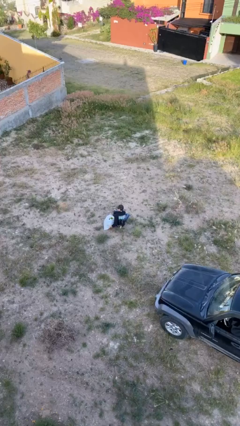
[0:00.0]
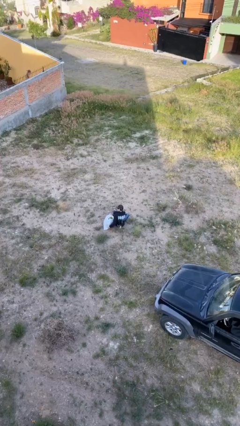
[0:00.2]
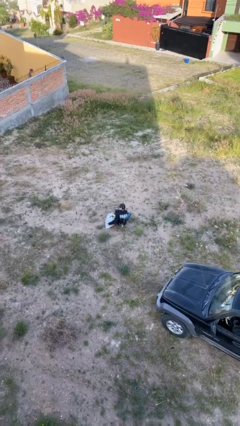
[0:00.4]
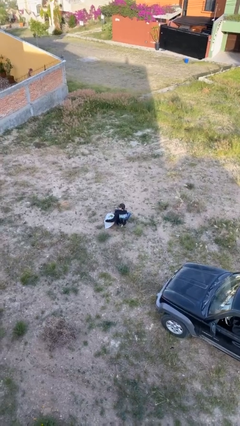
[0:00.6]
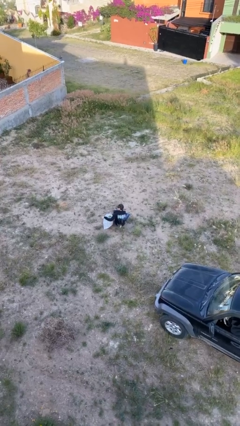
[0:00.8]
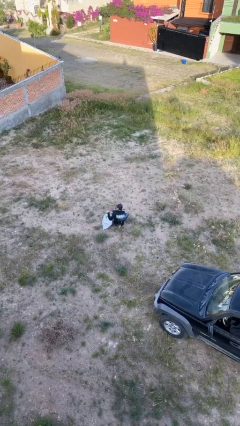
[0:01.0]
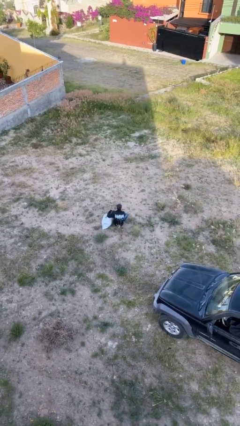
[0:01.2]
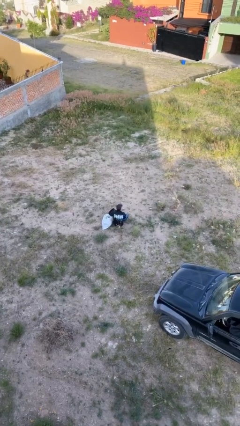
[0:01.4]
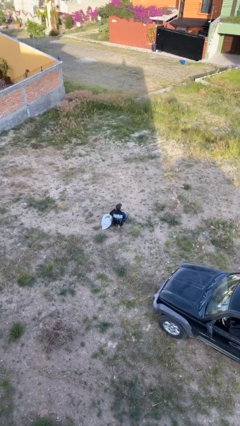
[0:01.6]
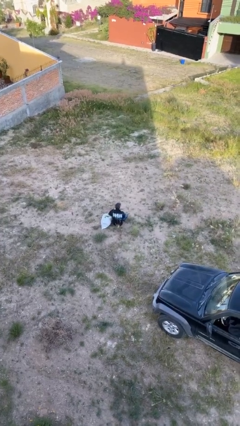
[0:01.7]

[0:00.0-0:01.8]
person puts down object on floor

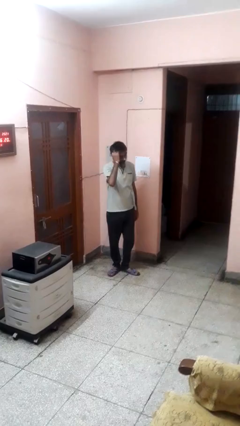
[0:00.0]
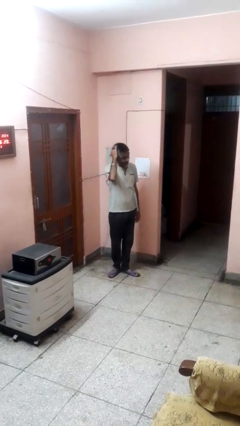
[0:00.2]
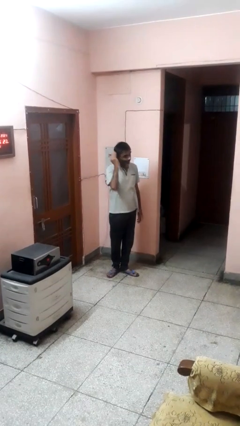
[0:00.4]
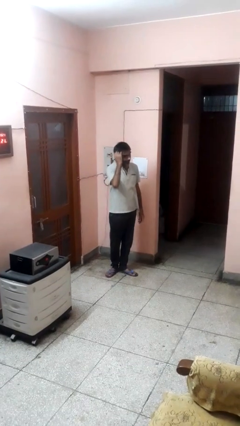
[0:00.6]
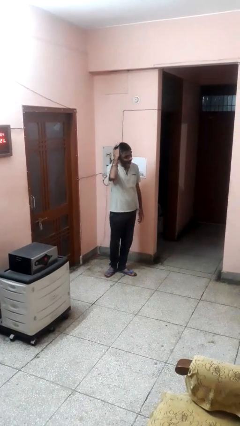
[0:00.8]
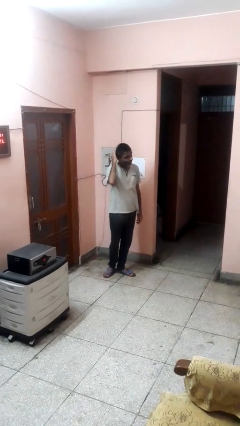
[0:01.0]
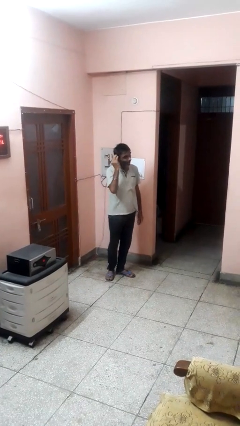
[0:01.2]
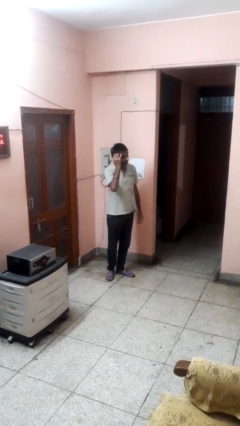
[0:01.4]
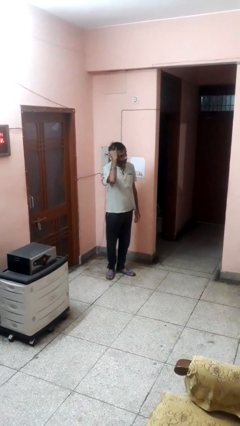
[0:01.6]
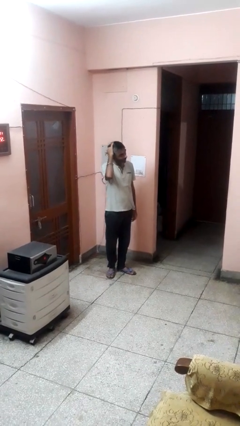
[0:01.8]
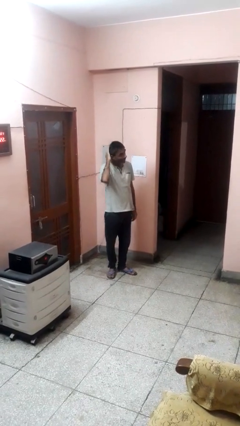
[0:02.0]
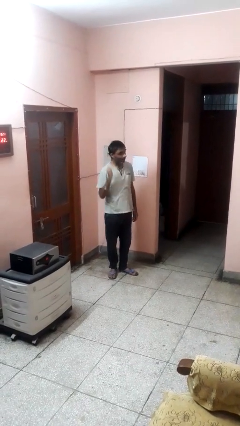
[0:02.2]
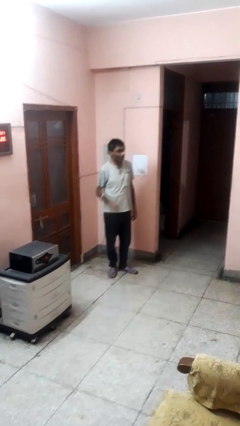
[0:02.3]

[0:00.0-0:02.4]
person strokes hair

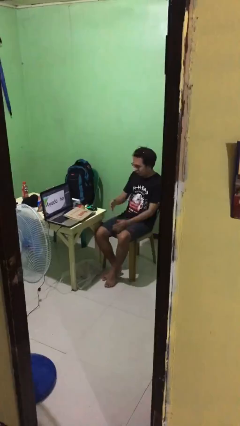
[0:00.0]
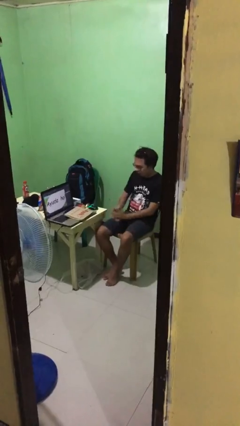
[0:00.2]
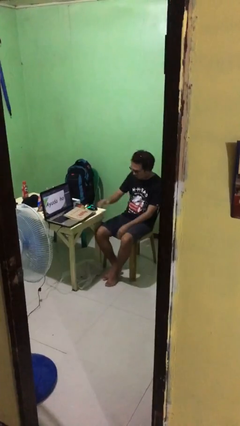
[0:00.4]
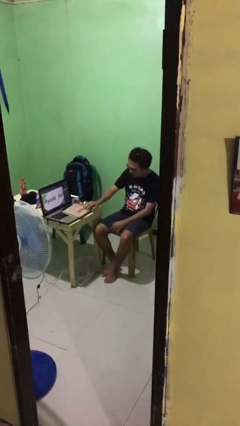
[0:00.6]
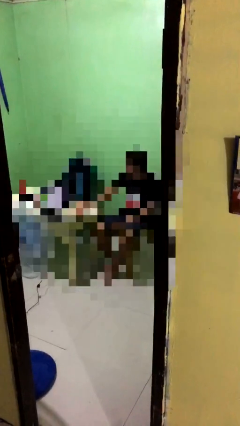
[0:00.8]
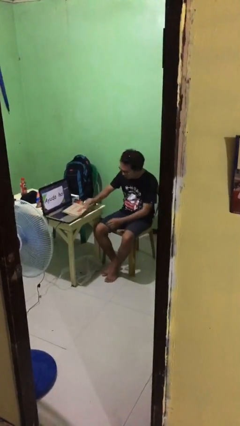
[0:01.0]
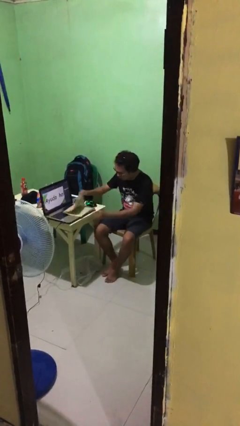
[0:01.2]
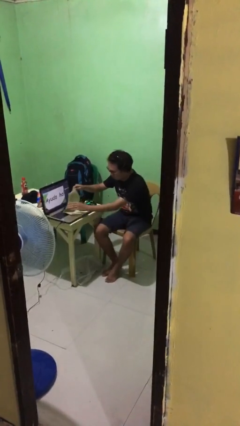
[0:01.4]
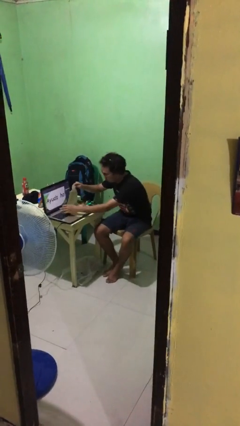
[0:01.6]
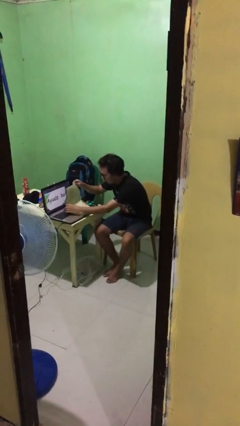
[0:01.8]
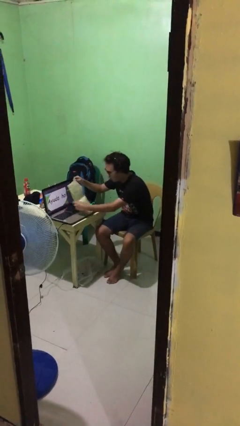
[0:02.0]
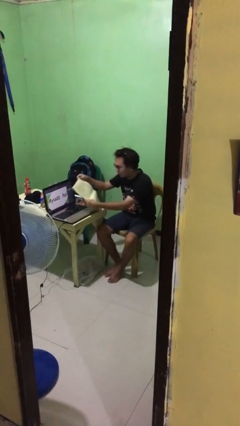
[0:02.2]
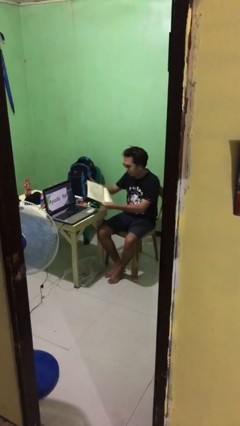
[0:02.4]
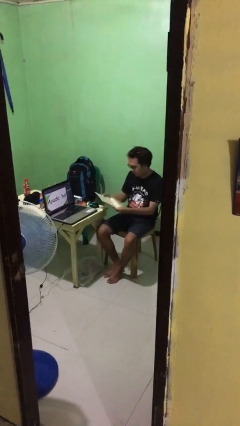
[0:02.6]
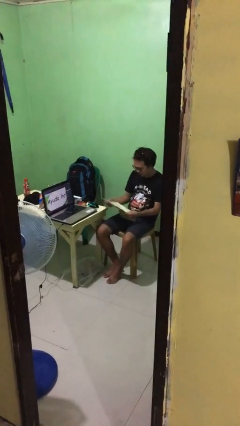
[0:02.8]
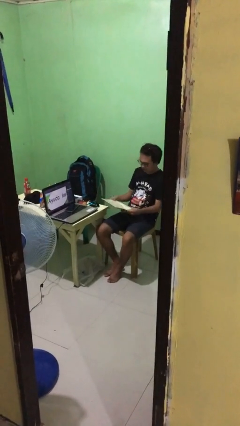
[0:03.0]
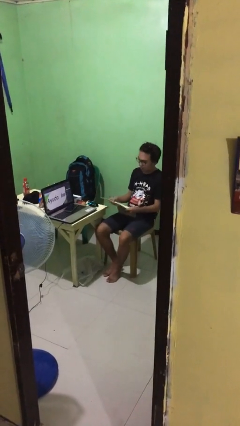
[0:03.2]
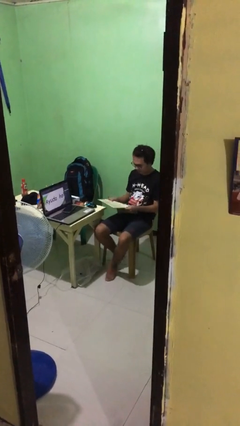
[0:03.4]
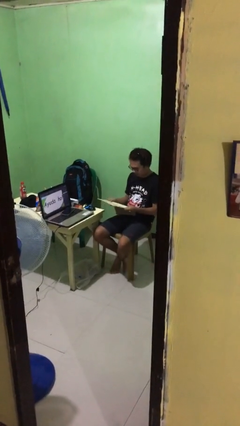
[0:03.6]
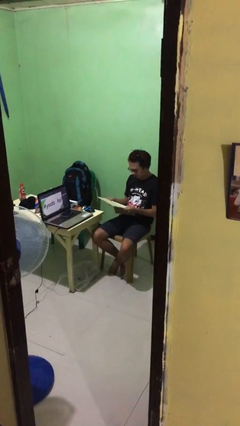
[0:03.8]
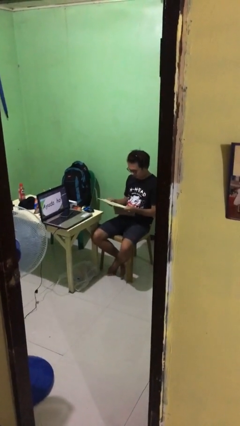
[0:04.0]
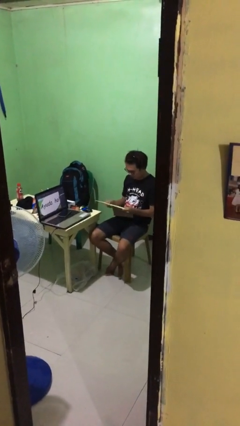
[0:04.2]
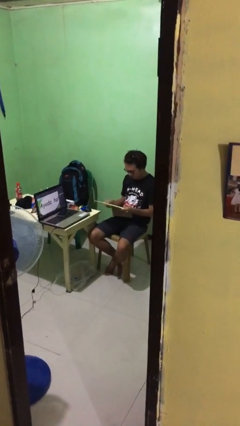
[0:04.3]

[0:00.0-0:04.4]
person reads document

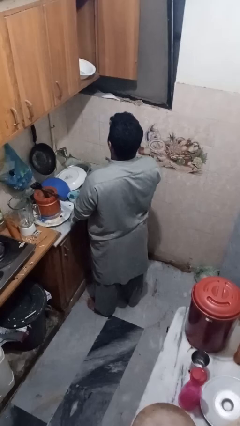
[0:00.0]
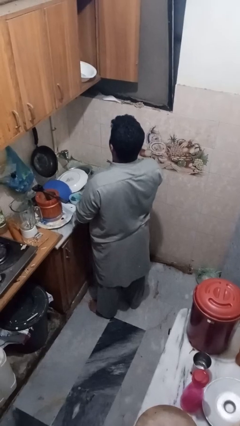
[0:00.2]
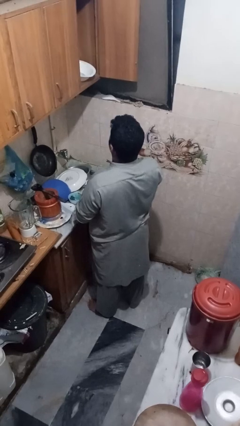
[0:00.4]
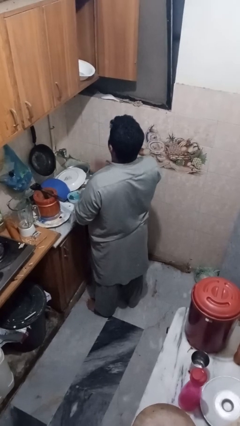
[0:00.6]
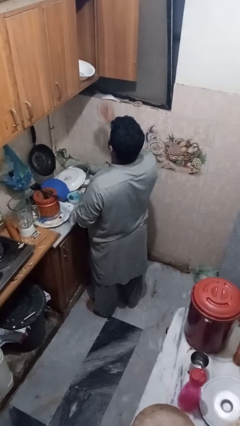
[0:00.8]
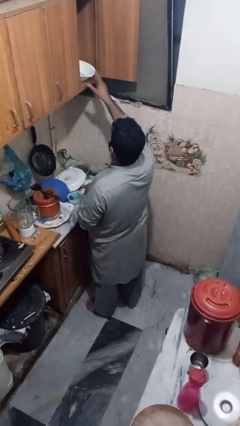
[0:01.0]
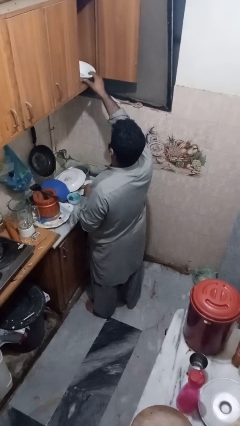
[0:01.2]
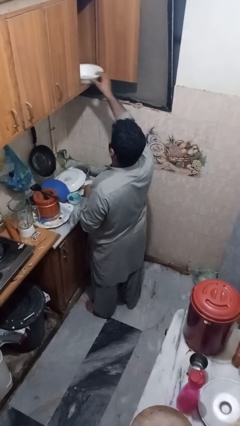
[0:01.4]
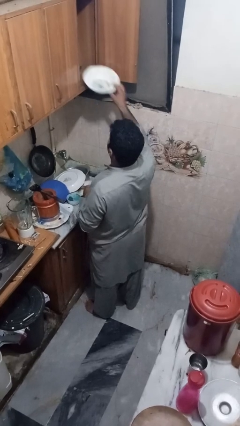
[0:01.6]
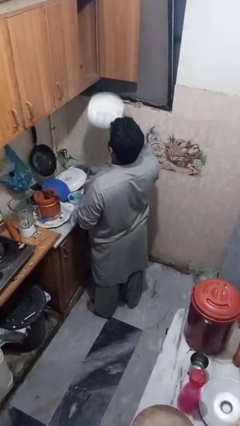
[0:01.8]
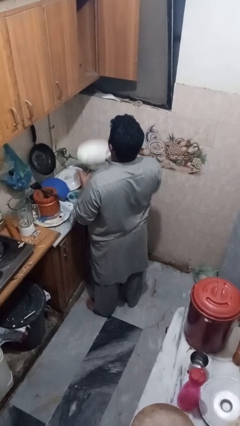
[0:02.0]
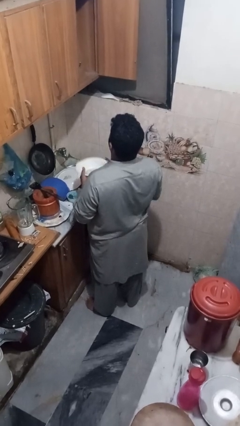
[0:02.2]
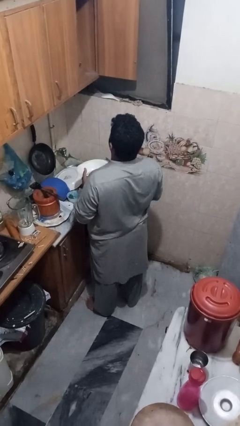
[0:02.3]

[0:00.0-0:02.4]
person takes object from cabinet

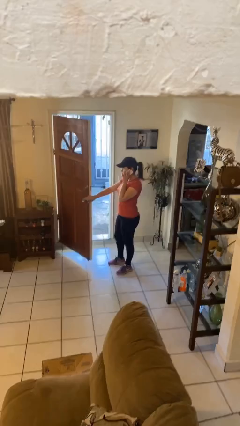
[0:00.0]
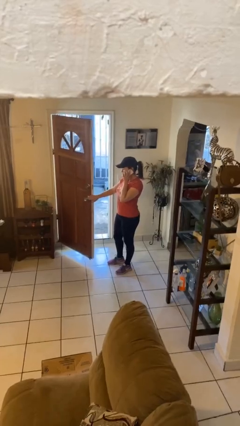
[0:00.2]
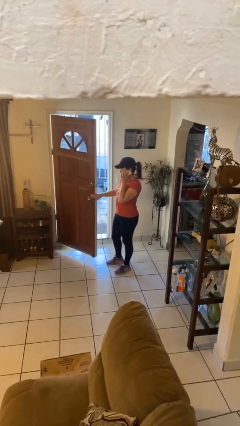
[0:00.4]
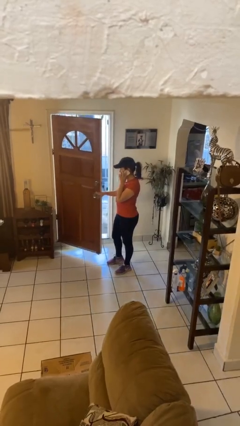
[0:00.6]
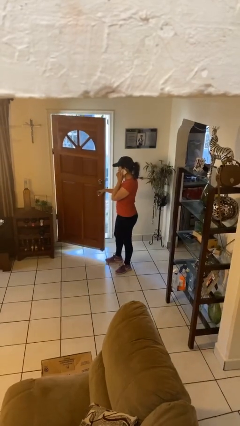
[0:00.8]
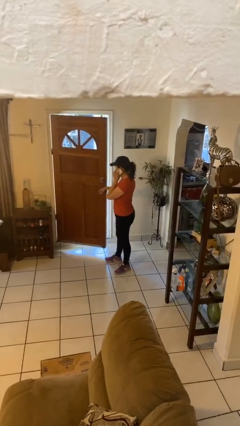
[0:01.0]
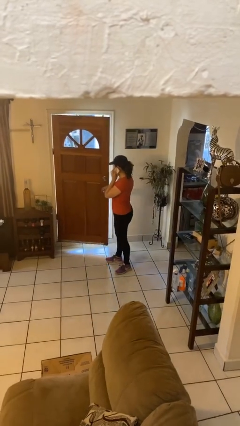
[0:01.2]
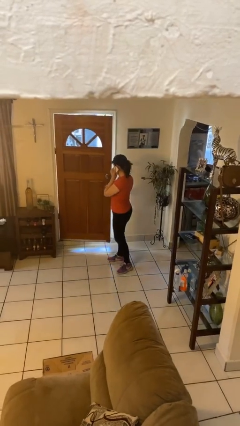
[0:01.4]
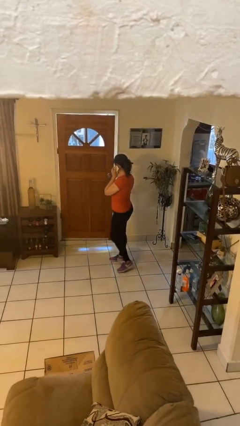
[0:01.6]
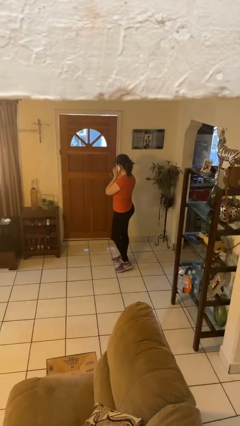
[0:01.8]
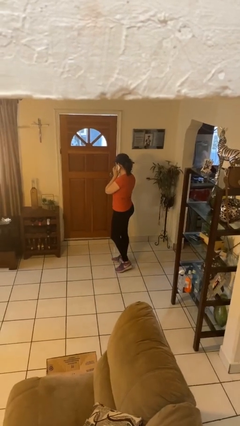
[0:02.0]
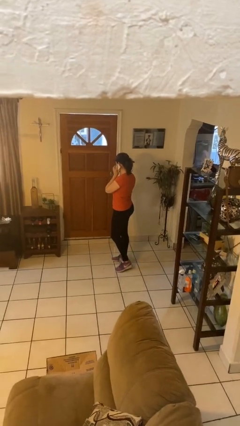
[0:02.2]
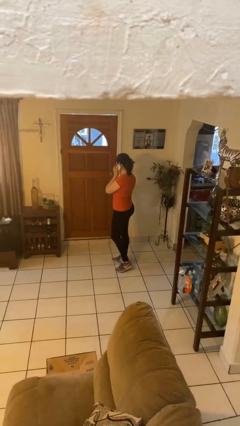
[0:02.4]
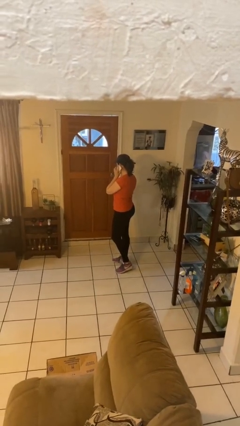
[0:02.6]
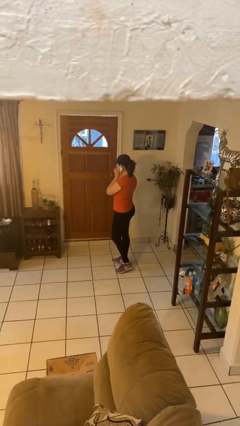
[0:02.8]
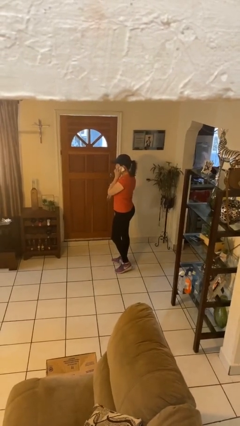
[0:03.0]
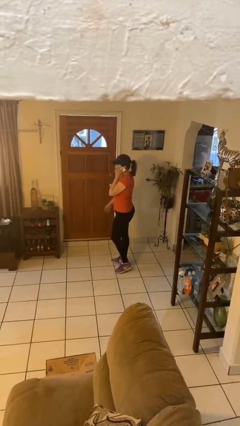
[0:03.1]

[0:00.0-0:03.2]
person closes facility door

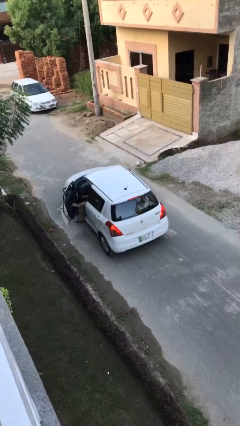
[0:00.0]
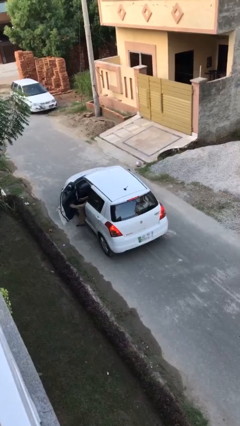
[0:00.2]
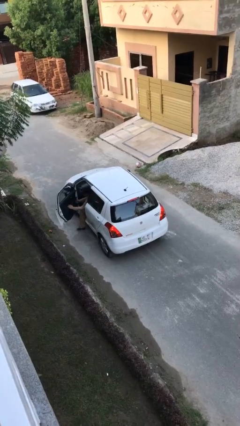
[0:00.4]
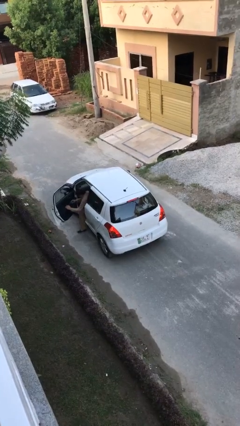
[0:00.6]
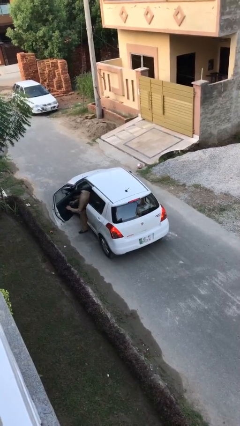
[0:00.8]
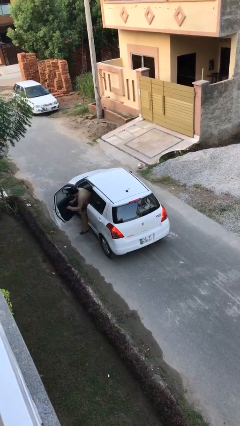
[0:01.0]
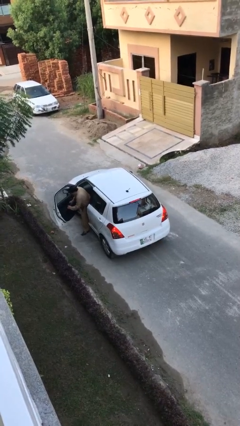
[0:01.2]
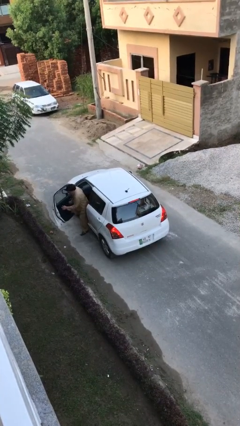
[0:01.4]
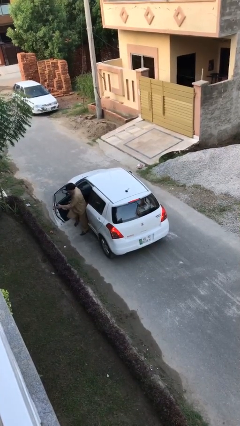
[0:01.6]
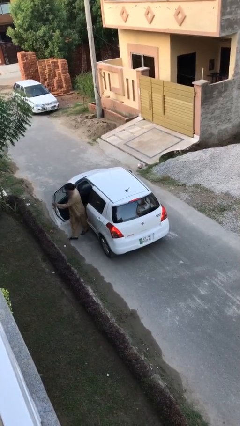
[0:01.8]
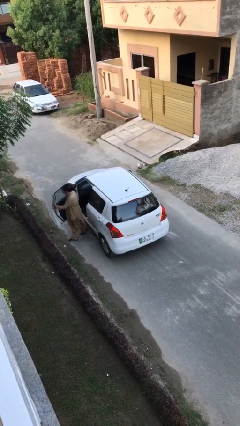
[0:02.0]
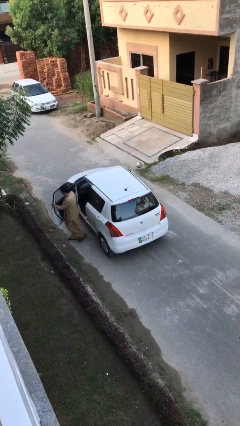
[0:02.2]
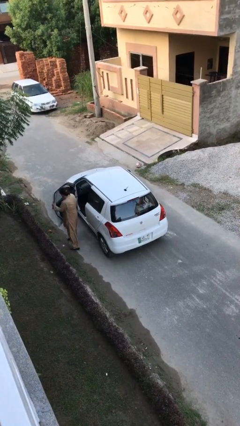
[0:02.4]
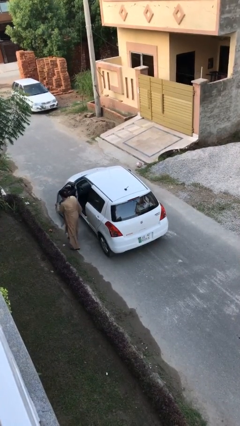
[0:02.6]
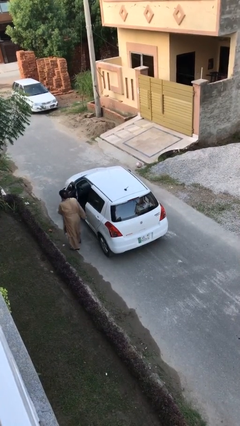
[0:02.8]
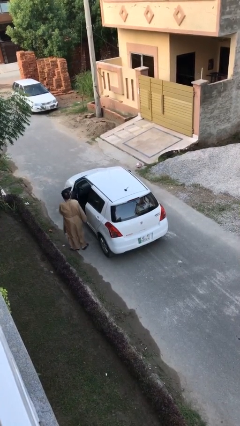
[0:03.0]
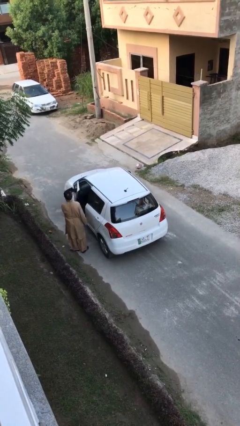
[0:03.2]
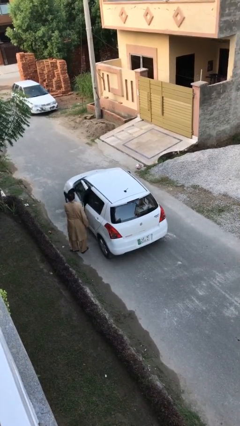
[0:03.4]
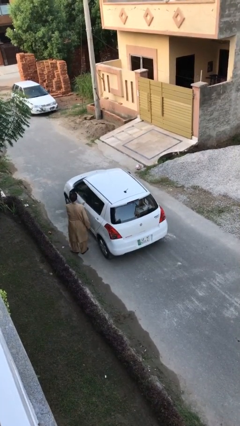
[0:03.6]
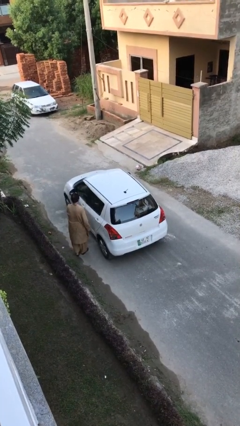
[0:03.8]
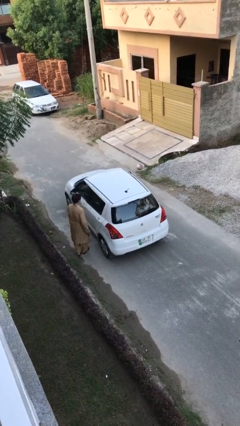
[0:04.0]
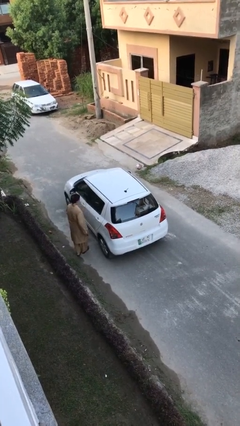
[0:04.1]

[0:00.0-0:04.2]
car picks up person
